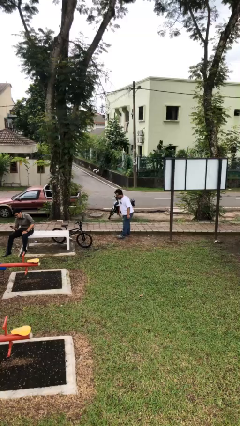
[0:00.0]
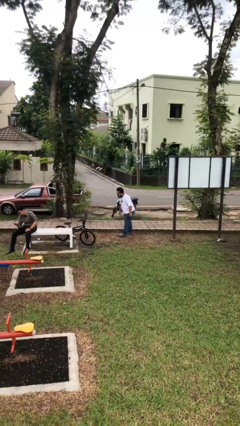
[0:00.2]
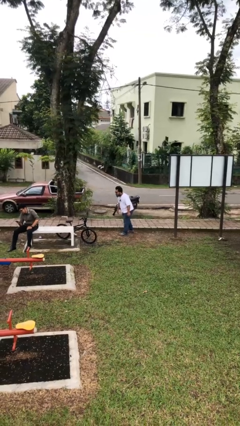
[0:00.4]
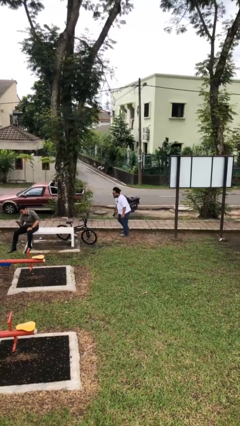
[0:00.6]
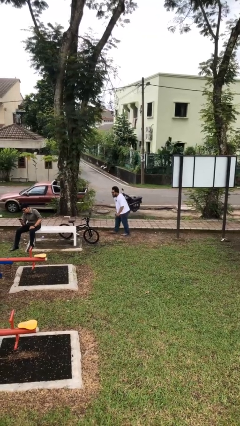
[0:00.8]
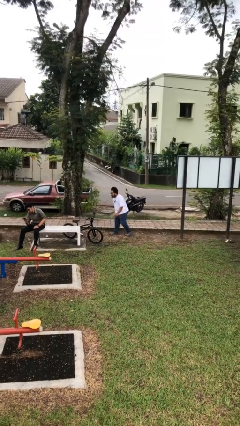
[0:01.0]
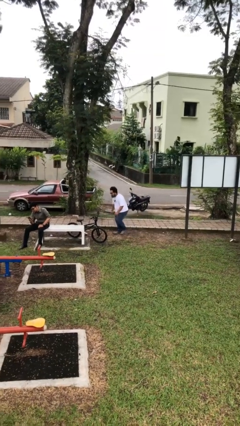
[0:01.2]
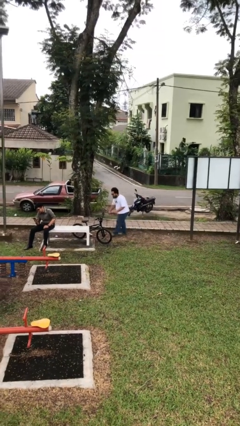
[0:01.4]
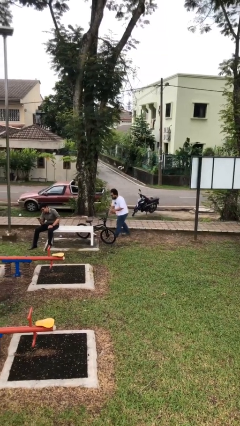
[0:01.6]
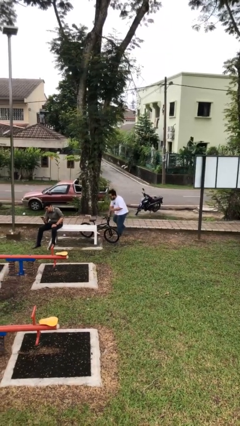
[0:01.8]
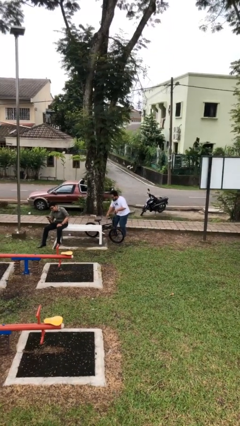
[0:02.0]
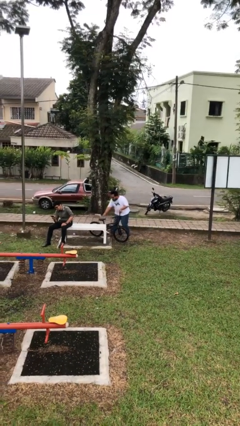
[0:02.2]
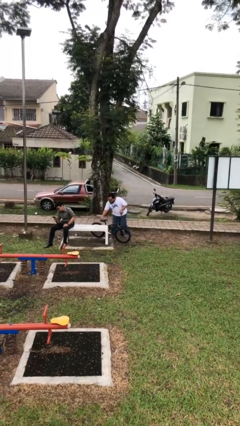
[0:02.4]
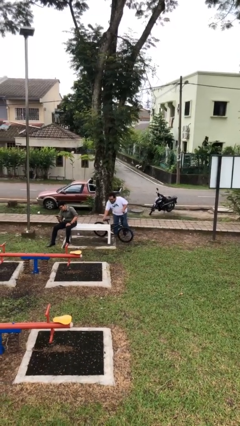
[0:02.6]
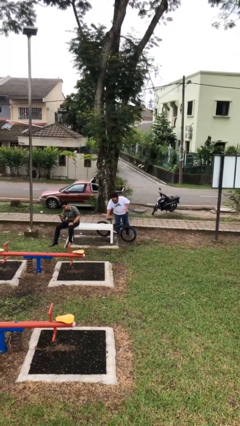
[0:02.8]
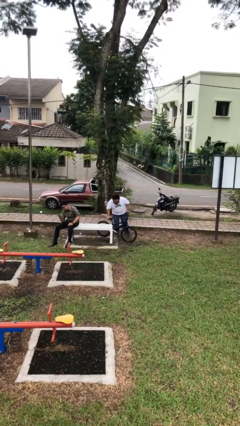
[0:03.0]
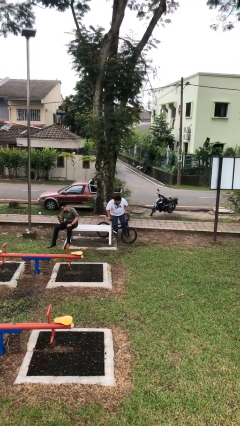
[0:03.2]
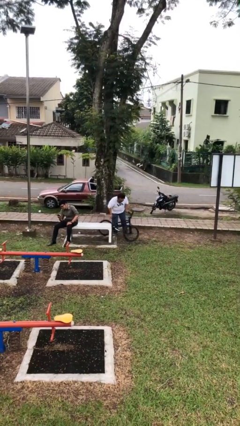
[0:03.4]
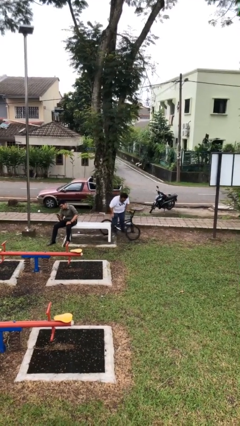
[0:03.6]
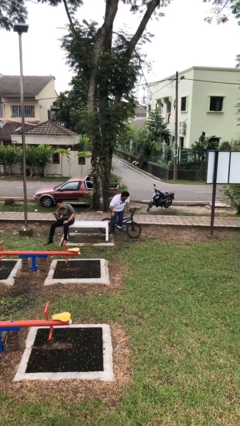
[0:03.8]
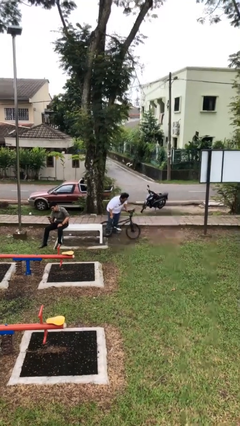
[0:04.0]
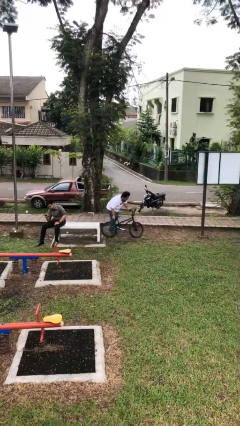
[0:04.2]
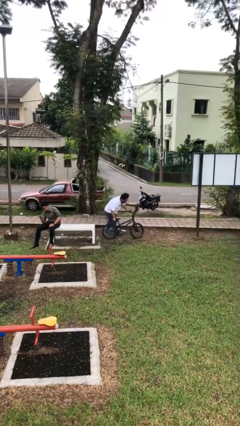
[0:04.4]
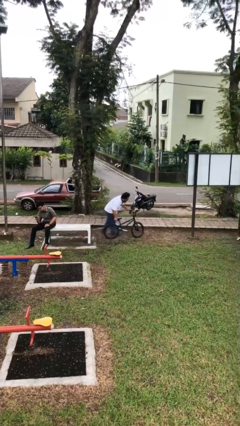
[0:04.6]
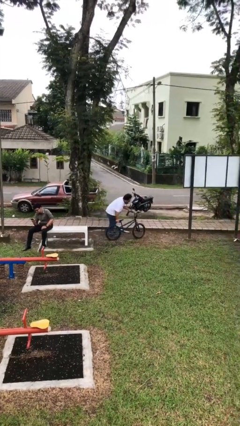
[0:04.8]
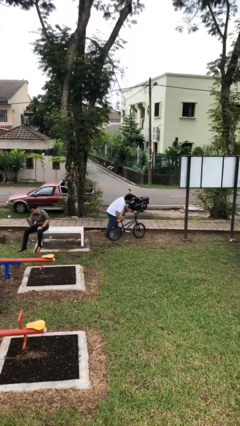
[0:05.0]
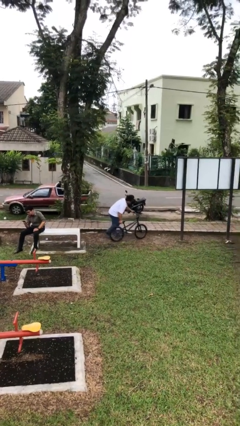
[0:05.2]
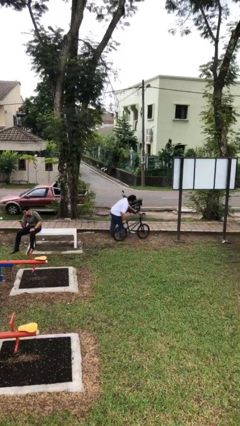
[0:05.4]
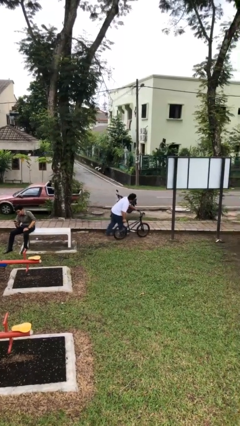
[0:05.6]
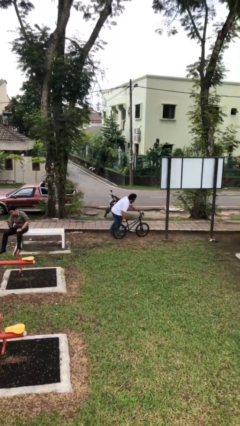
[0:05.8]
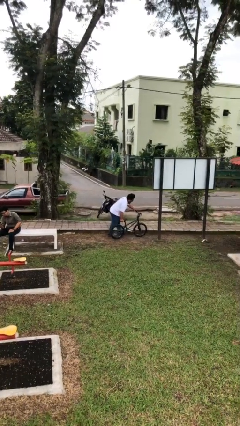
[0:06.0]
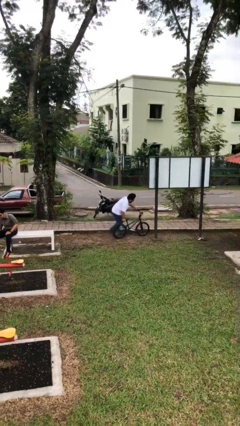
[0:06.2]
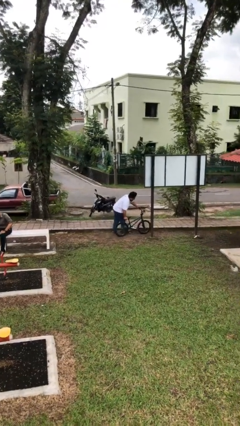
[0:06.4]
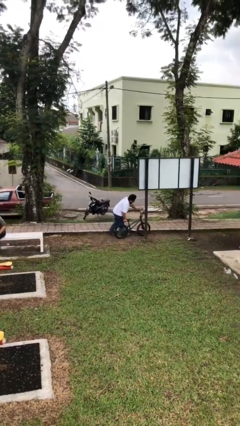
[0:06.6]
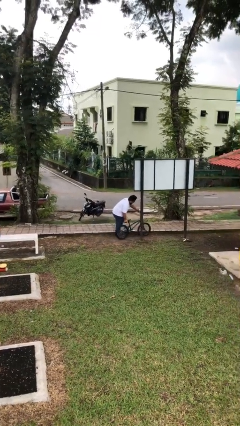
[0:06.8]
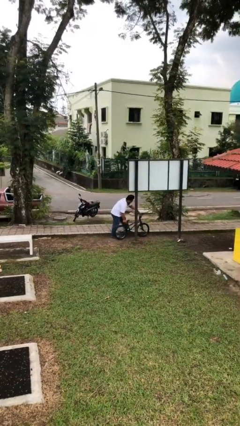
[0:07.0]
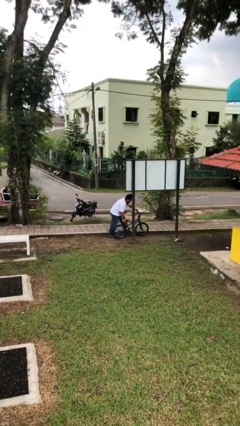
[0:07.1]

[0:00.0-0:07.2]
person steals object from person

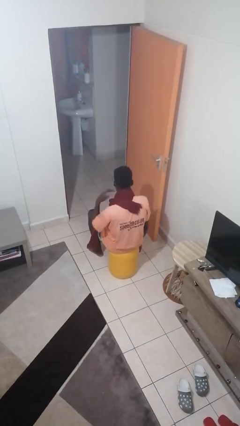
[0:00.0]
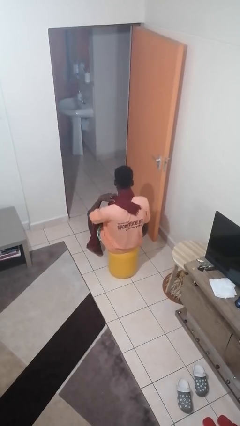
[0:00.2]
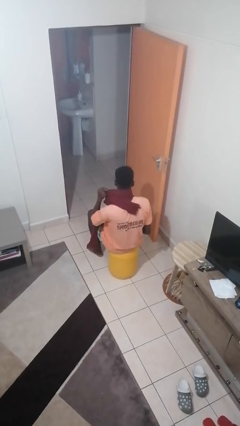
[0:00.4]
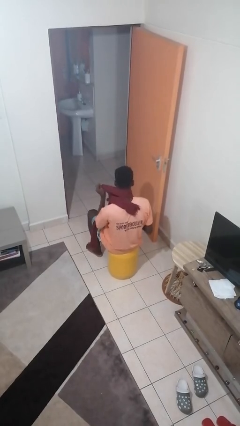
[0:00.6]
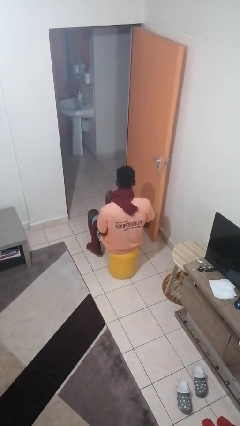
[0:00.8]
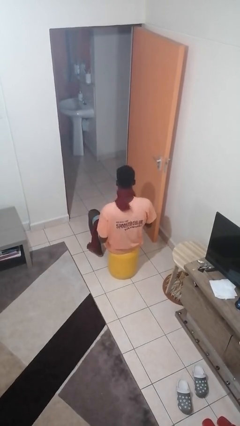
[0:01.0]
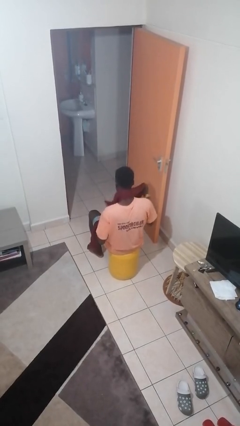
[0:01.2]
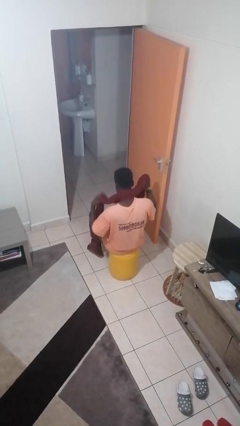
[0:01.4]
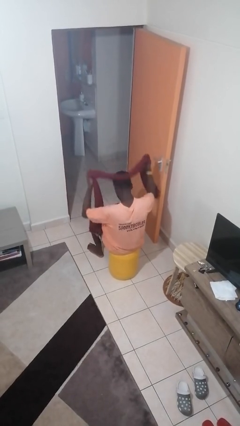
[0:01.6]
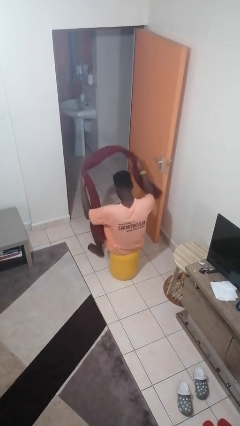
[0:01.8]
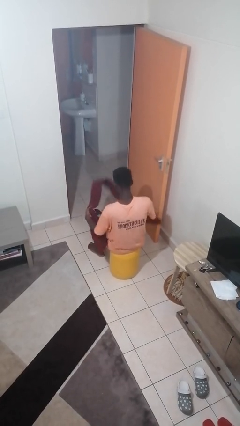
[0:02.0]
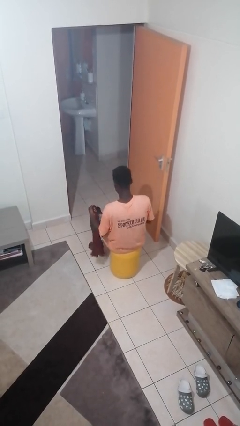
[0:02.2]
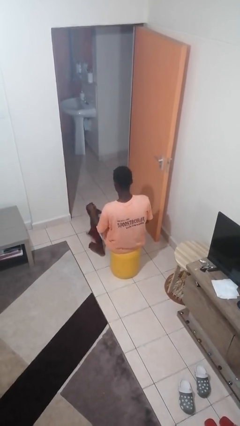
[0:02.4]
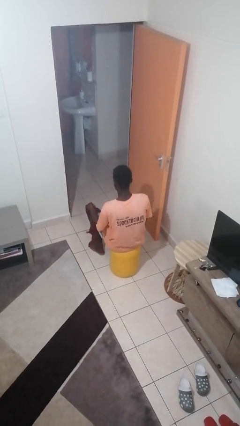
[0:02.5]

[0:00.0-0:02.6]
person takes off scarf

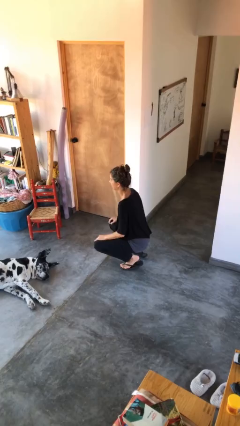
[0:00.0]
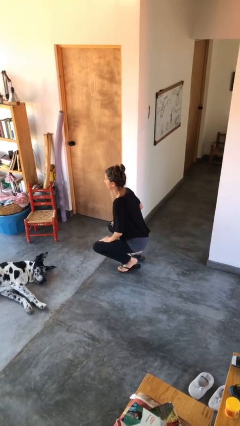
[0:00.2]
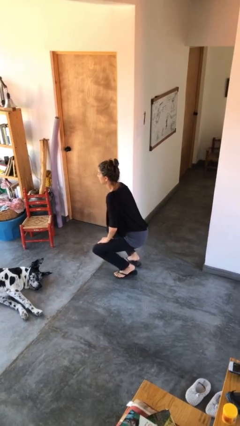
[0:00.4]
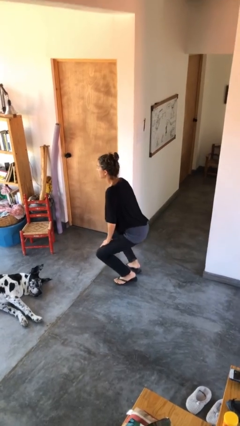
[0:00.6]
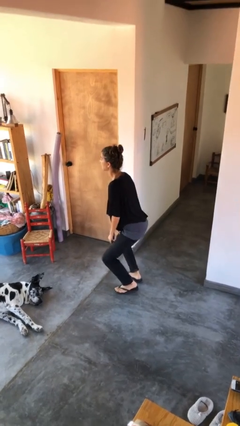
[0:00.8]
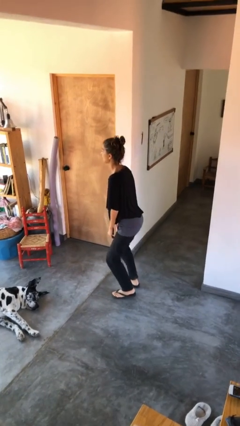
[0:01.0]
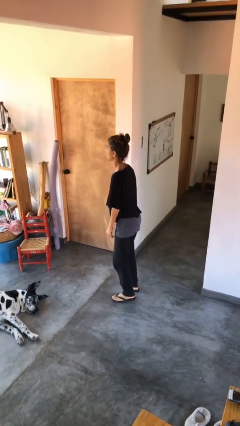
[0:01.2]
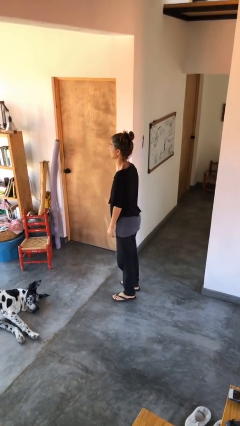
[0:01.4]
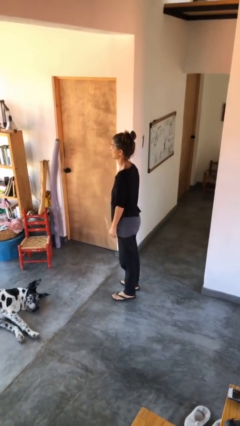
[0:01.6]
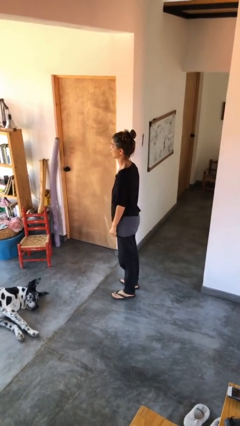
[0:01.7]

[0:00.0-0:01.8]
person stands up

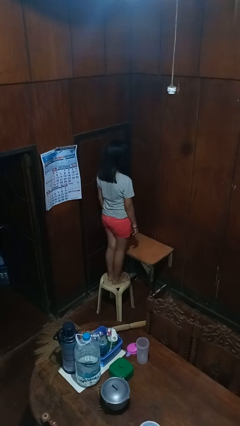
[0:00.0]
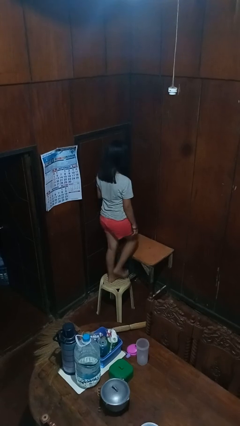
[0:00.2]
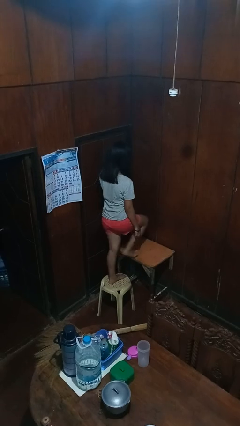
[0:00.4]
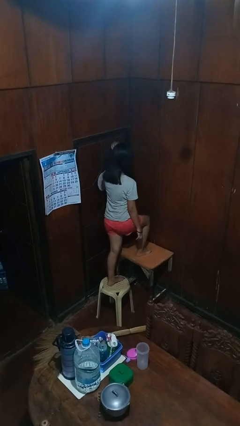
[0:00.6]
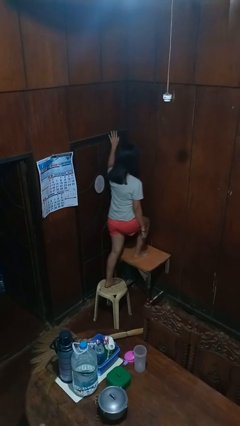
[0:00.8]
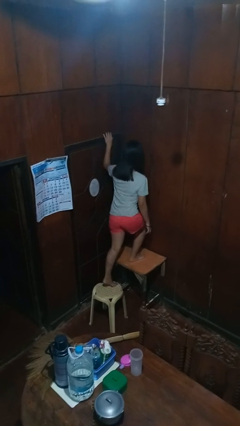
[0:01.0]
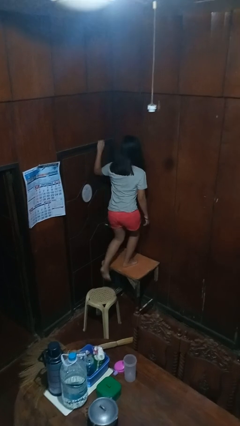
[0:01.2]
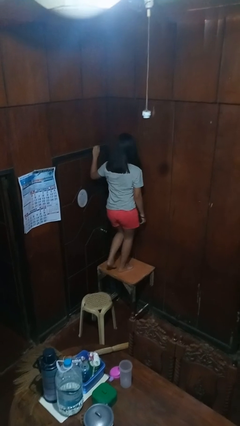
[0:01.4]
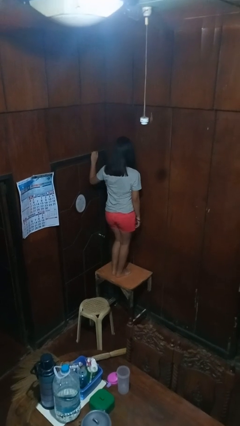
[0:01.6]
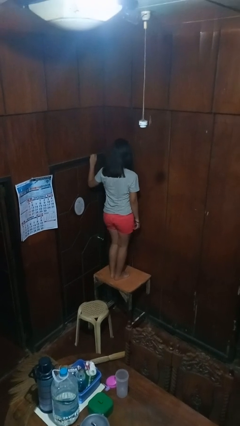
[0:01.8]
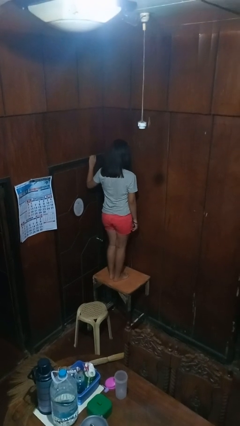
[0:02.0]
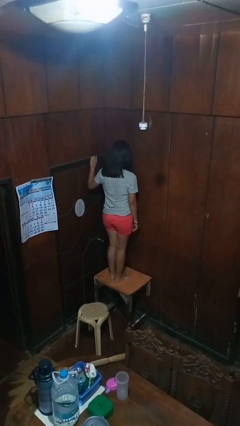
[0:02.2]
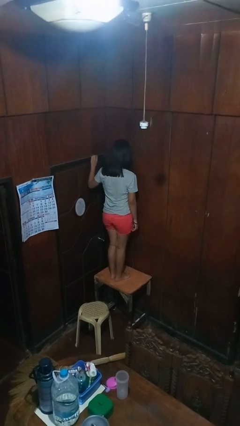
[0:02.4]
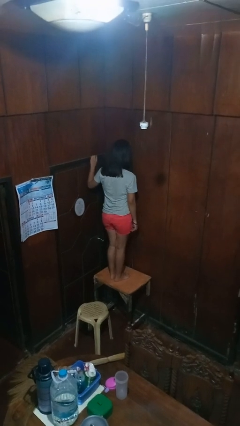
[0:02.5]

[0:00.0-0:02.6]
person climbs on table

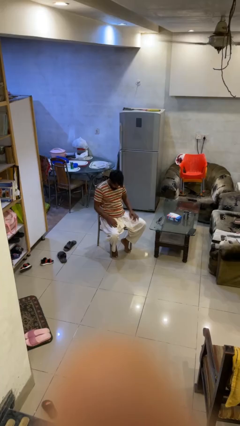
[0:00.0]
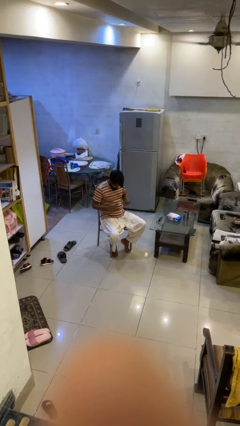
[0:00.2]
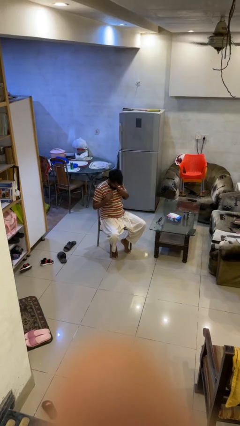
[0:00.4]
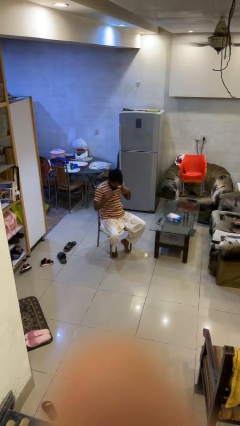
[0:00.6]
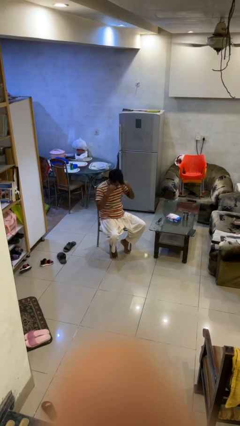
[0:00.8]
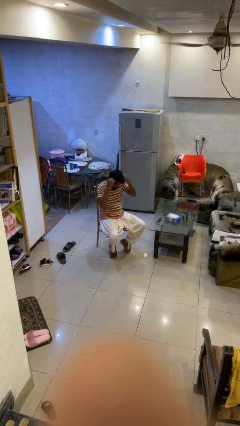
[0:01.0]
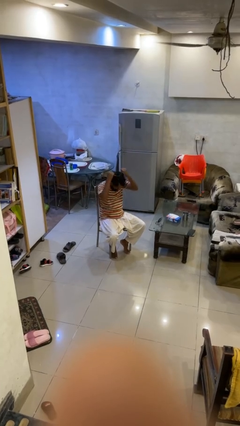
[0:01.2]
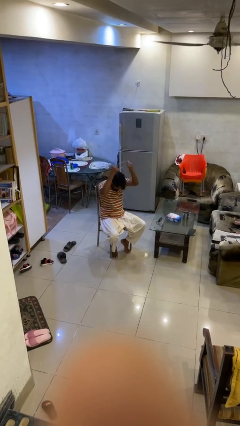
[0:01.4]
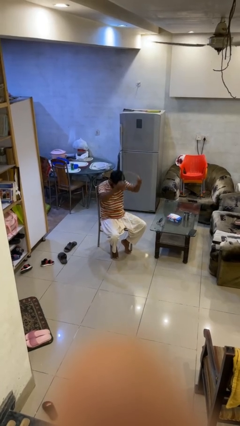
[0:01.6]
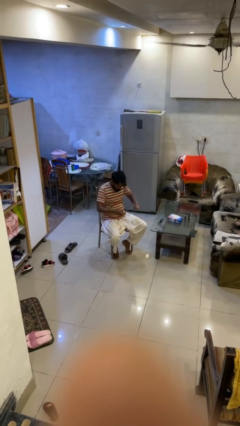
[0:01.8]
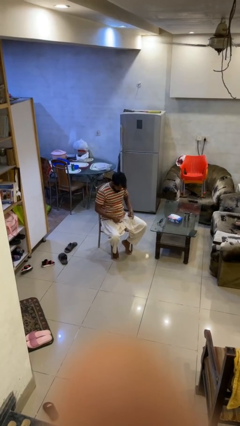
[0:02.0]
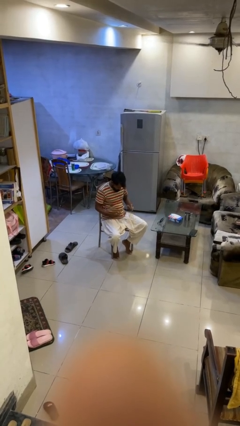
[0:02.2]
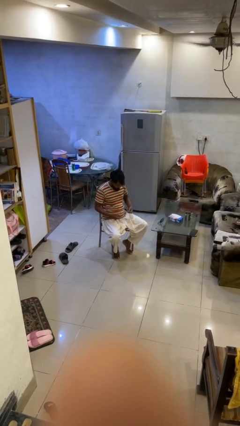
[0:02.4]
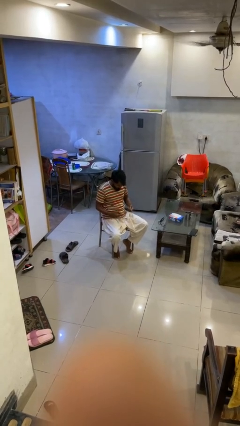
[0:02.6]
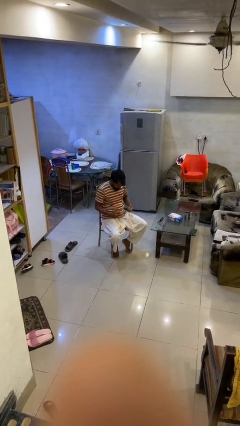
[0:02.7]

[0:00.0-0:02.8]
person takes off necklace

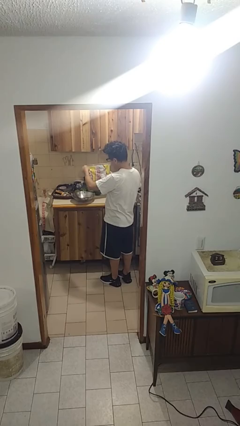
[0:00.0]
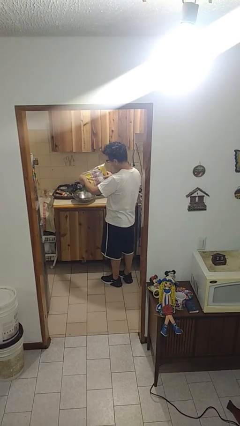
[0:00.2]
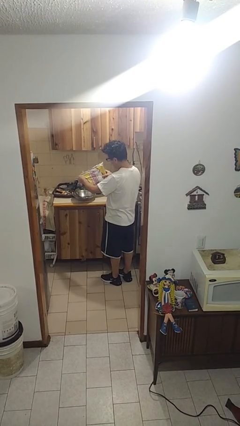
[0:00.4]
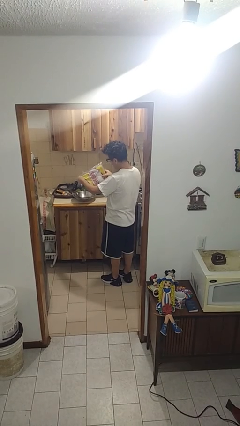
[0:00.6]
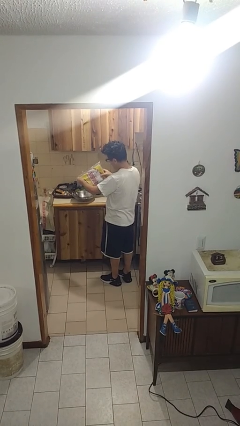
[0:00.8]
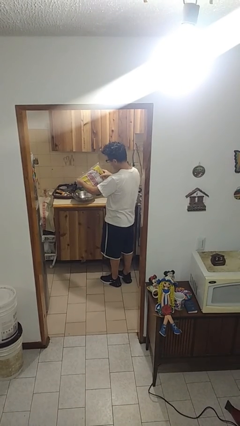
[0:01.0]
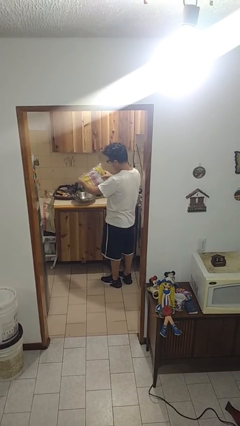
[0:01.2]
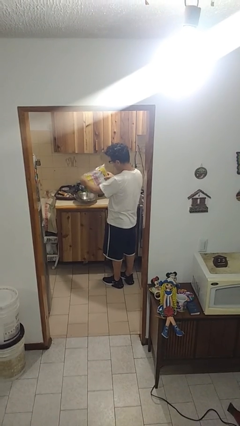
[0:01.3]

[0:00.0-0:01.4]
person pours into bowl
